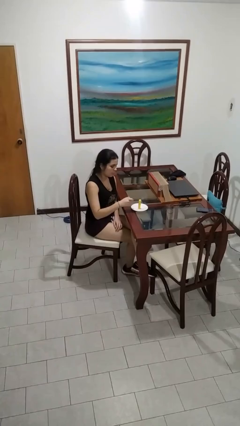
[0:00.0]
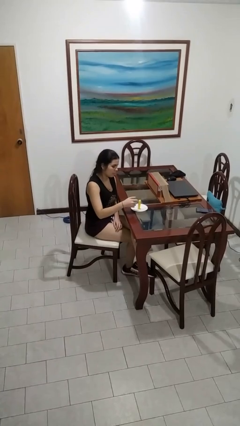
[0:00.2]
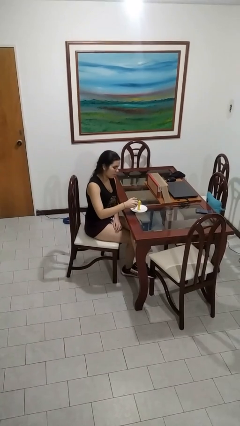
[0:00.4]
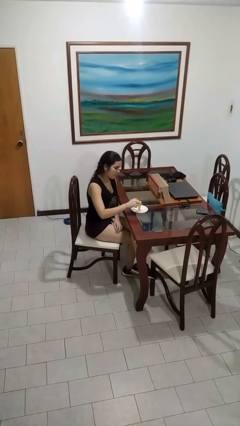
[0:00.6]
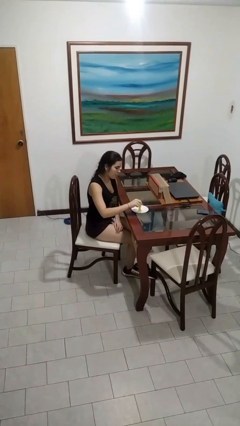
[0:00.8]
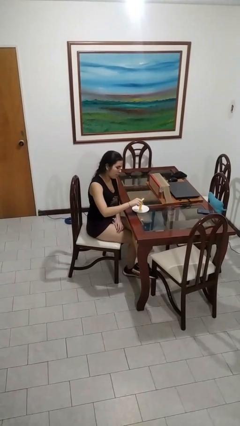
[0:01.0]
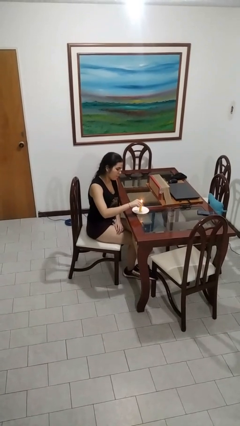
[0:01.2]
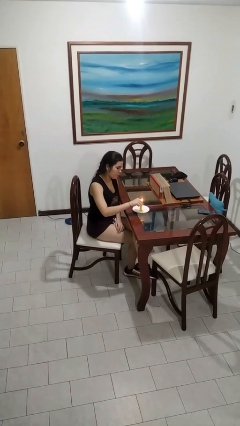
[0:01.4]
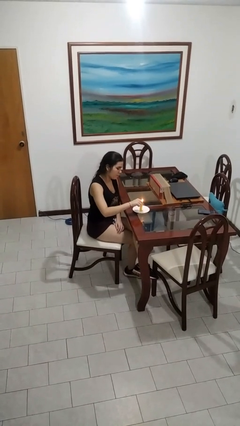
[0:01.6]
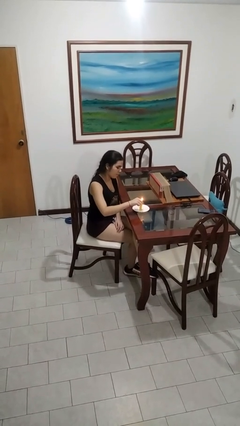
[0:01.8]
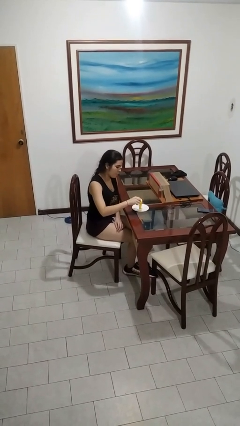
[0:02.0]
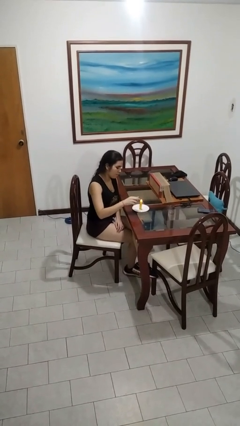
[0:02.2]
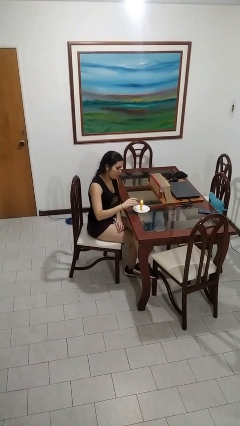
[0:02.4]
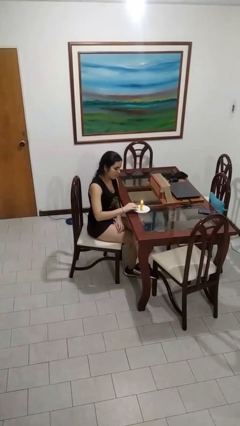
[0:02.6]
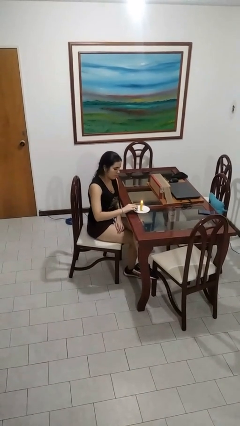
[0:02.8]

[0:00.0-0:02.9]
person lights candle

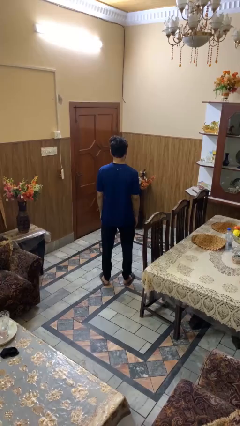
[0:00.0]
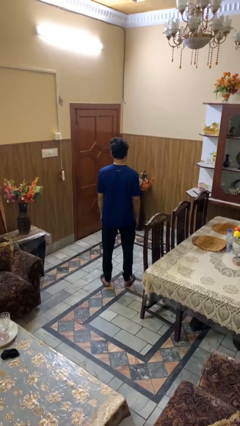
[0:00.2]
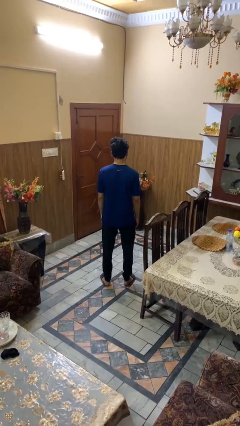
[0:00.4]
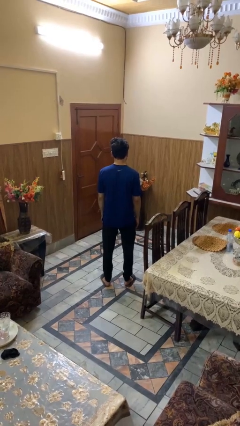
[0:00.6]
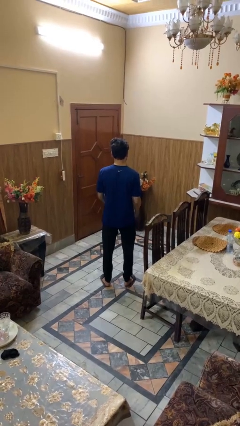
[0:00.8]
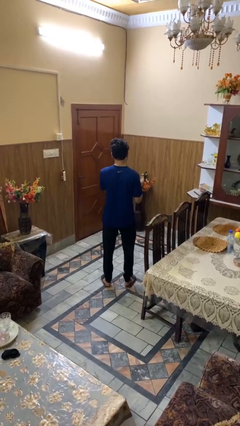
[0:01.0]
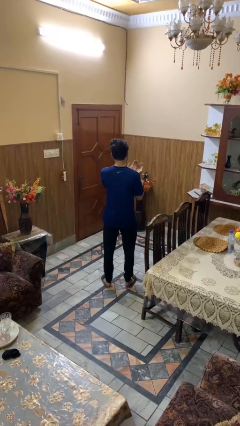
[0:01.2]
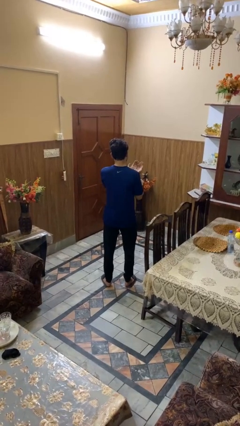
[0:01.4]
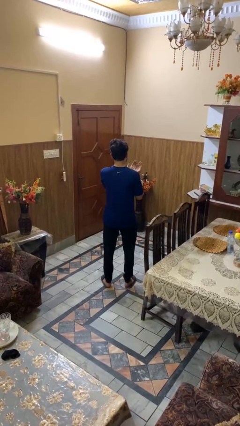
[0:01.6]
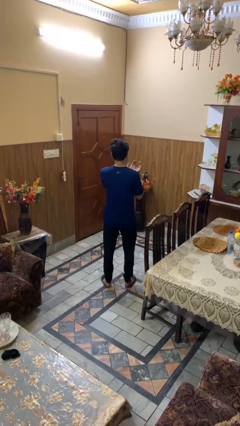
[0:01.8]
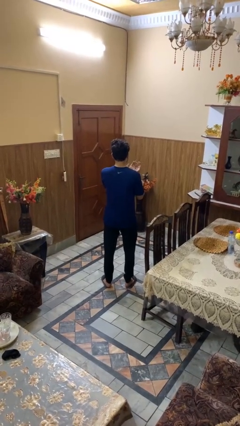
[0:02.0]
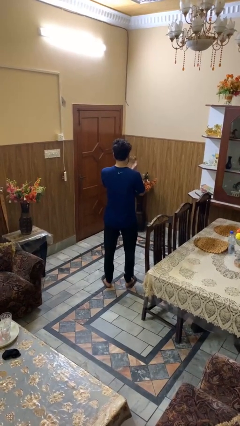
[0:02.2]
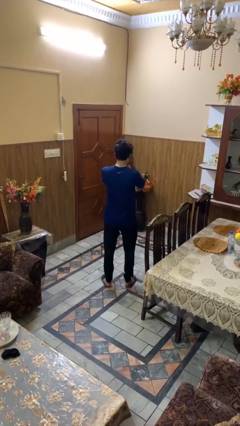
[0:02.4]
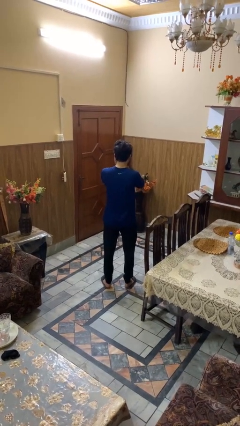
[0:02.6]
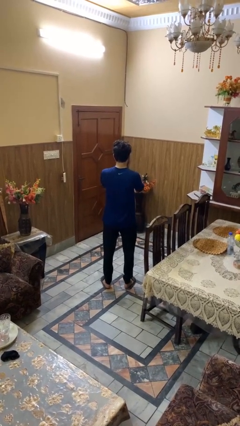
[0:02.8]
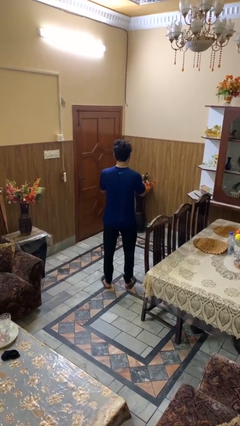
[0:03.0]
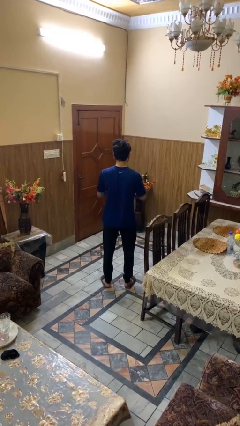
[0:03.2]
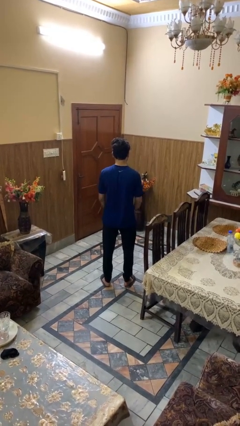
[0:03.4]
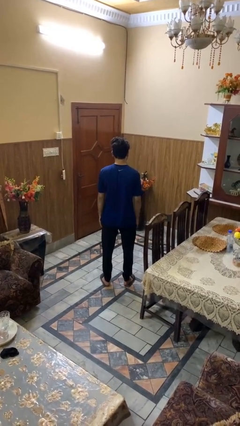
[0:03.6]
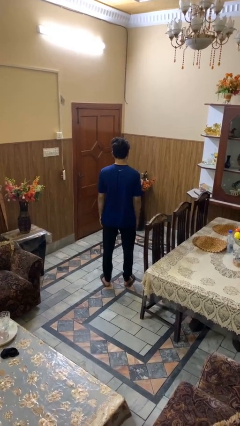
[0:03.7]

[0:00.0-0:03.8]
person prays

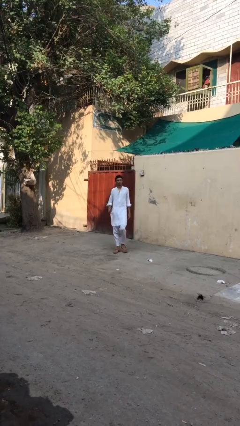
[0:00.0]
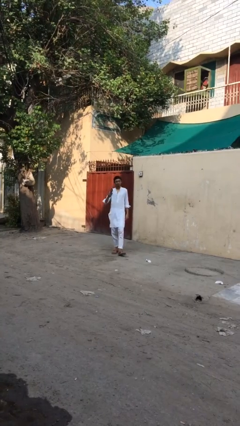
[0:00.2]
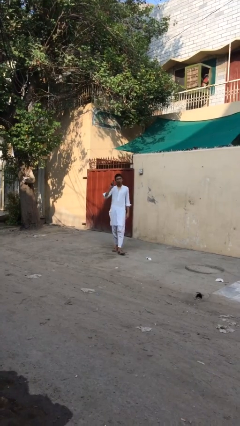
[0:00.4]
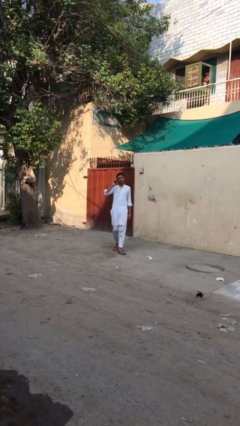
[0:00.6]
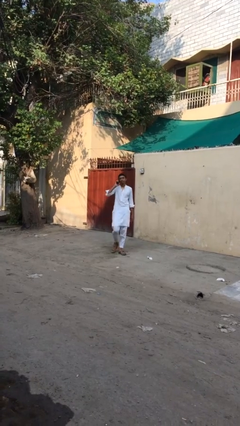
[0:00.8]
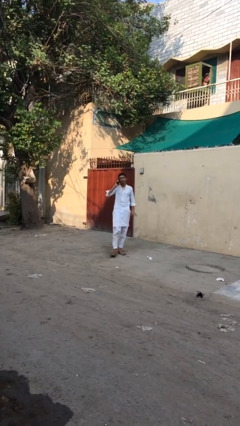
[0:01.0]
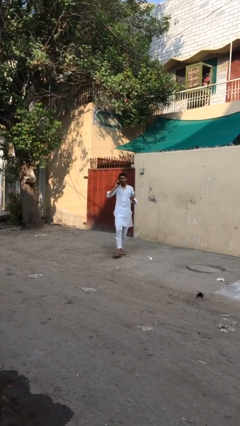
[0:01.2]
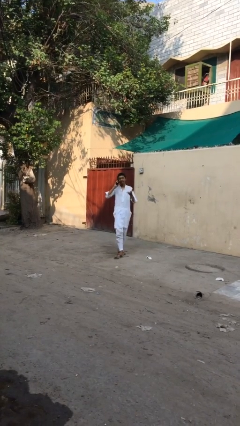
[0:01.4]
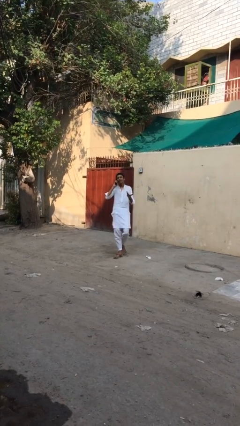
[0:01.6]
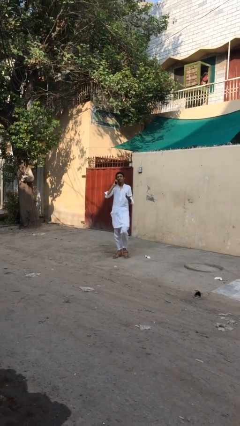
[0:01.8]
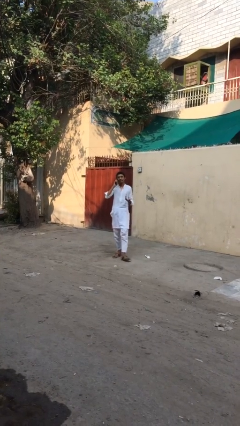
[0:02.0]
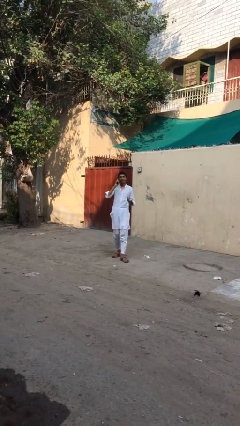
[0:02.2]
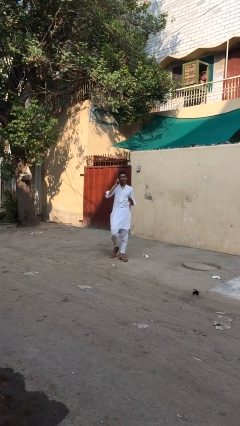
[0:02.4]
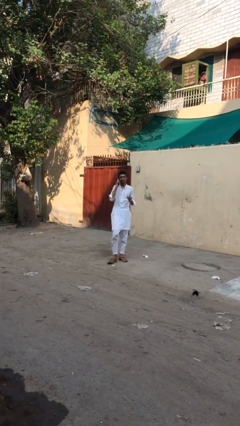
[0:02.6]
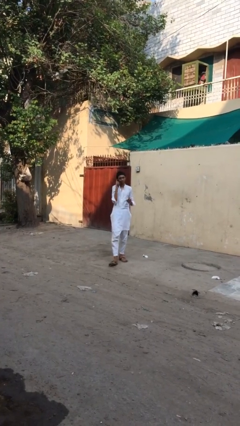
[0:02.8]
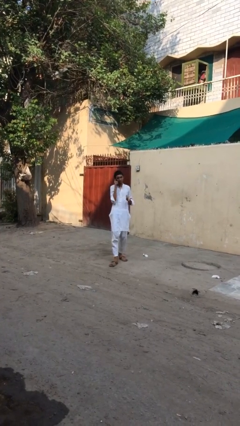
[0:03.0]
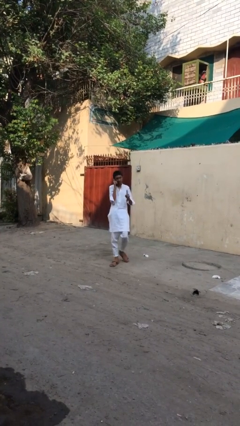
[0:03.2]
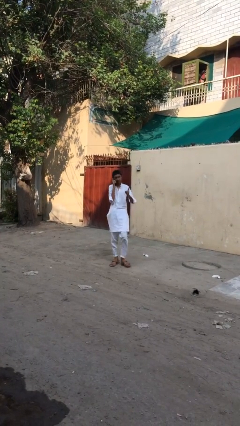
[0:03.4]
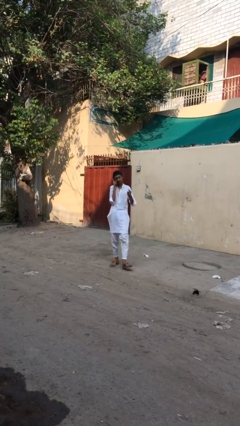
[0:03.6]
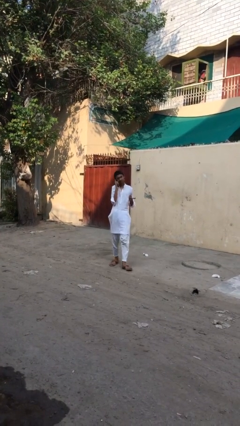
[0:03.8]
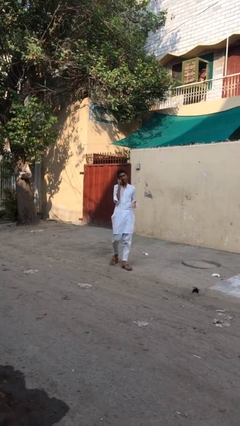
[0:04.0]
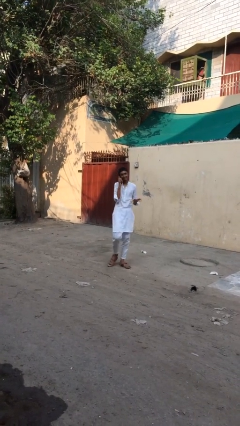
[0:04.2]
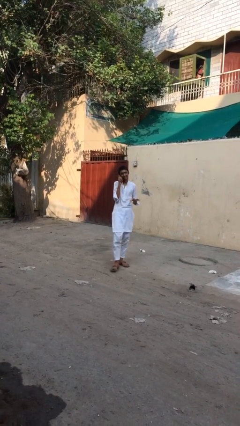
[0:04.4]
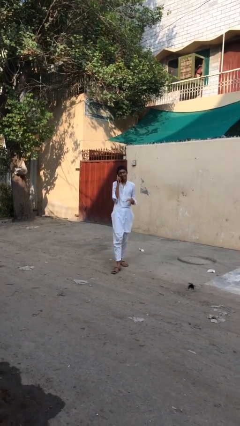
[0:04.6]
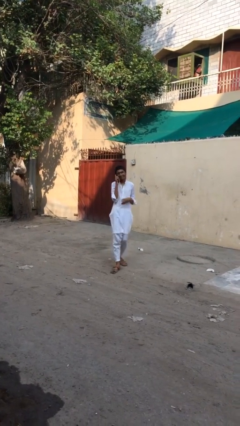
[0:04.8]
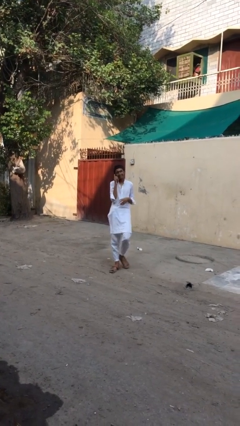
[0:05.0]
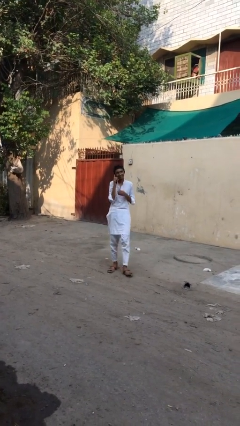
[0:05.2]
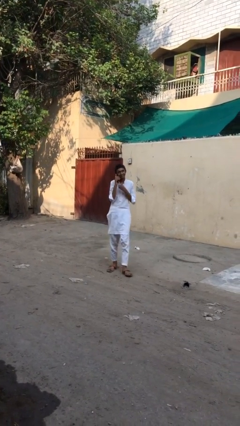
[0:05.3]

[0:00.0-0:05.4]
person talks on phone

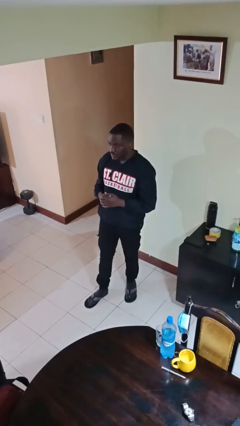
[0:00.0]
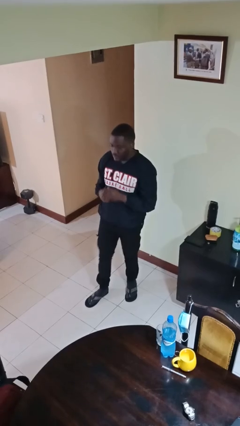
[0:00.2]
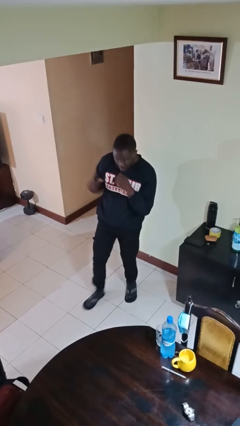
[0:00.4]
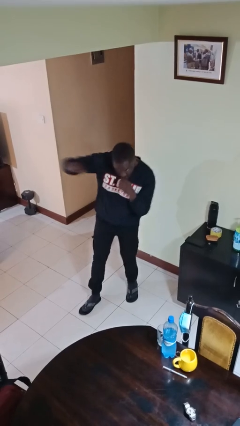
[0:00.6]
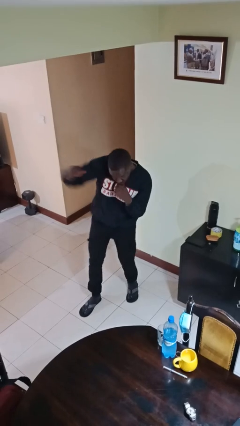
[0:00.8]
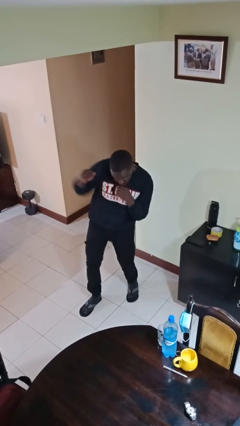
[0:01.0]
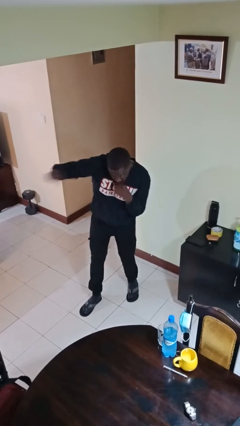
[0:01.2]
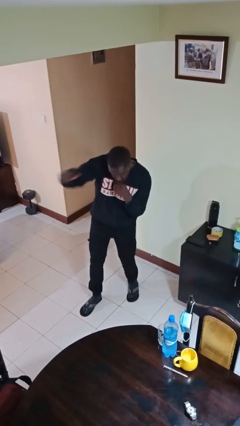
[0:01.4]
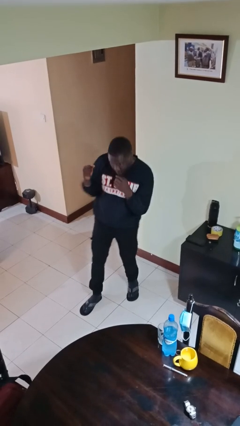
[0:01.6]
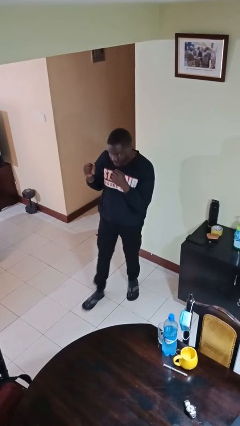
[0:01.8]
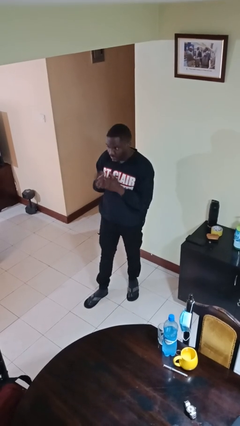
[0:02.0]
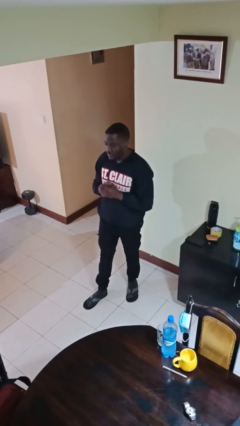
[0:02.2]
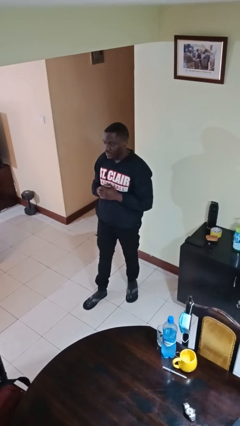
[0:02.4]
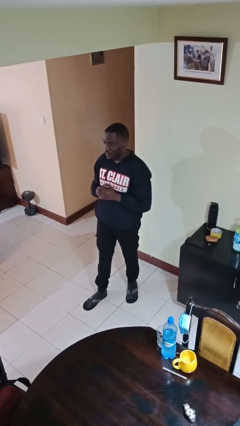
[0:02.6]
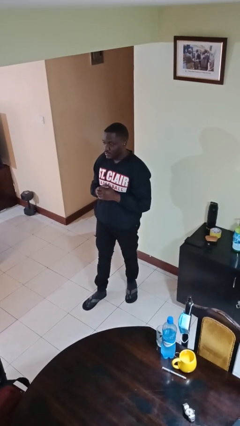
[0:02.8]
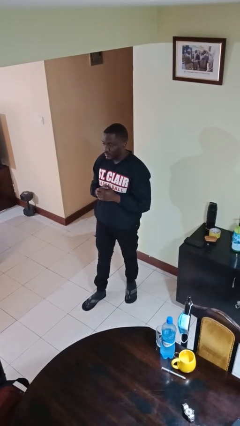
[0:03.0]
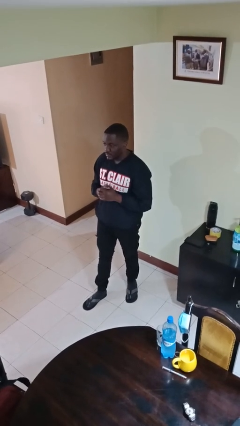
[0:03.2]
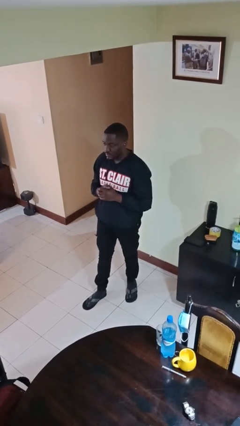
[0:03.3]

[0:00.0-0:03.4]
person punches

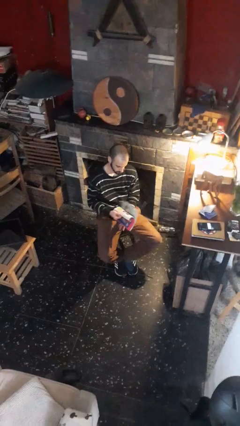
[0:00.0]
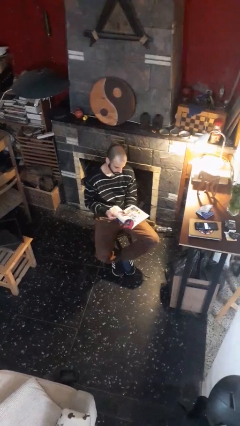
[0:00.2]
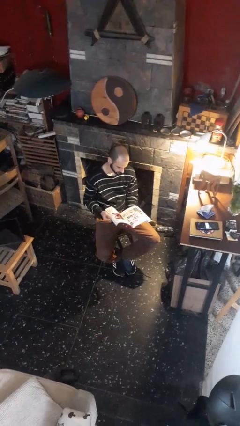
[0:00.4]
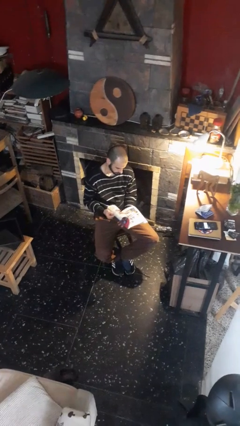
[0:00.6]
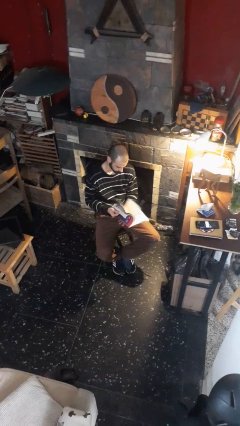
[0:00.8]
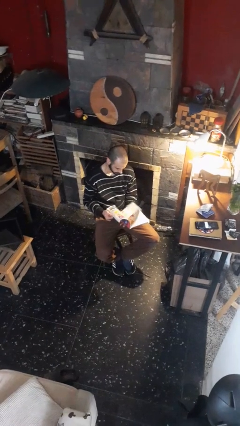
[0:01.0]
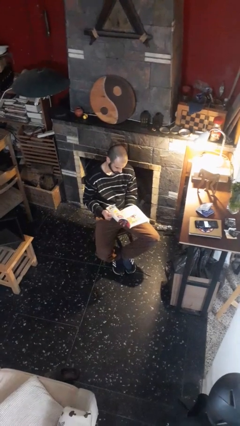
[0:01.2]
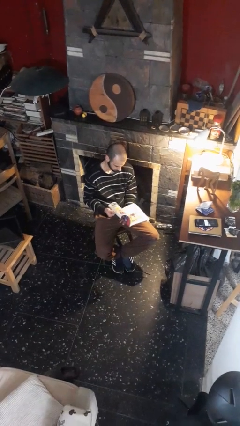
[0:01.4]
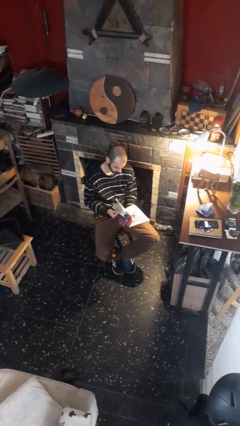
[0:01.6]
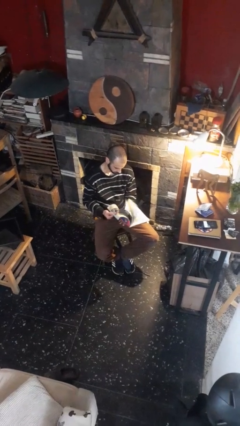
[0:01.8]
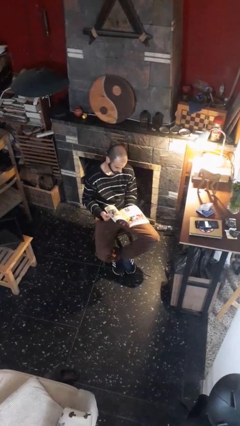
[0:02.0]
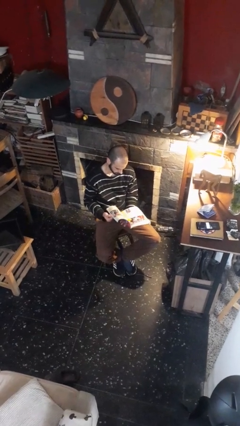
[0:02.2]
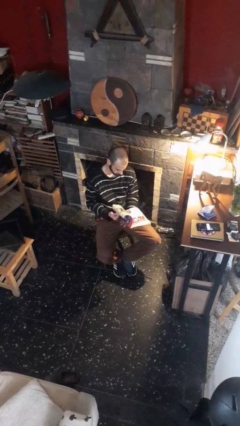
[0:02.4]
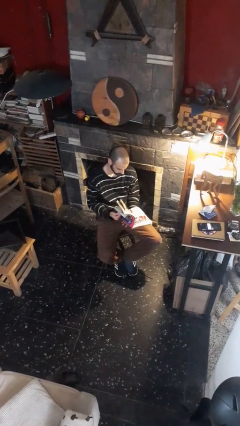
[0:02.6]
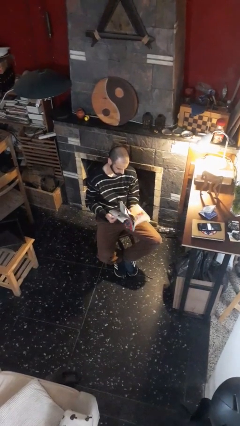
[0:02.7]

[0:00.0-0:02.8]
person reads magazine
